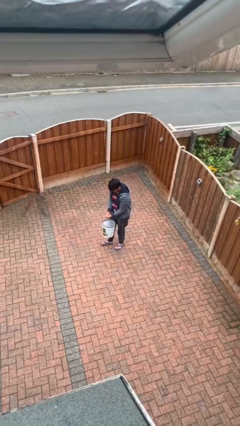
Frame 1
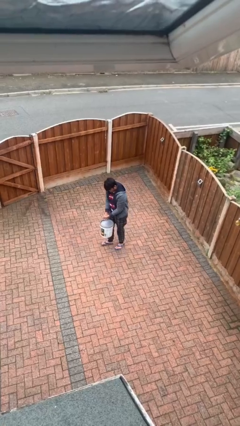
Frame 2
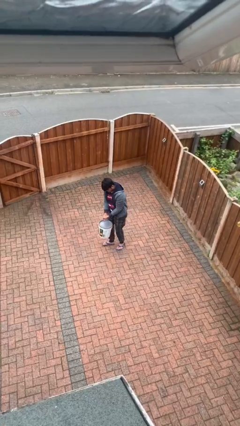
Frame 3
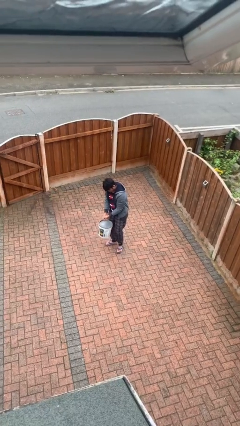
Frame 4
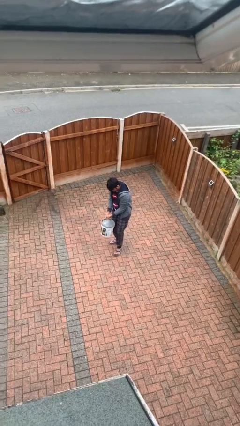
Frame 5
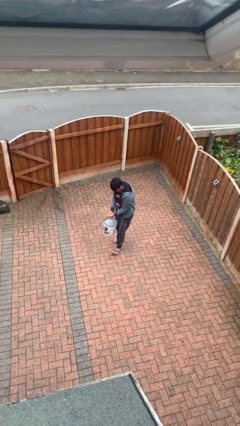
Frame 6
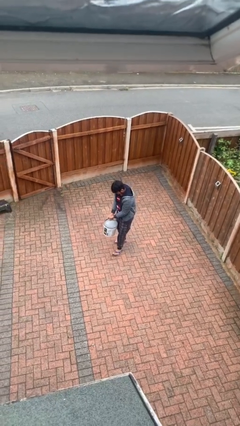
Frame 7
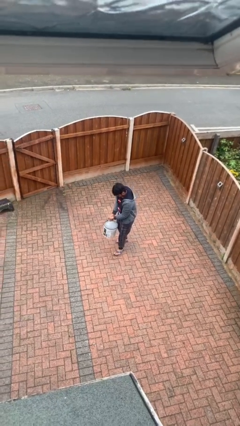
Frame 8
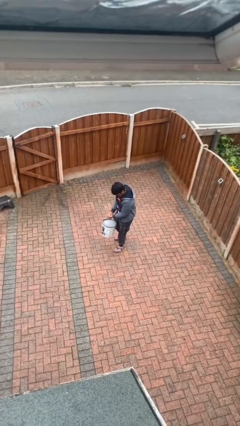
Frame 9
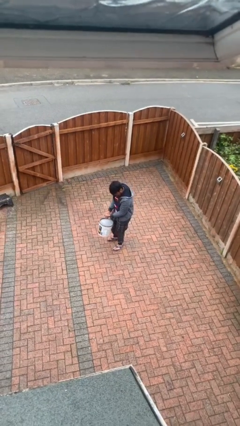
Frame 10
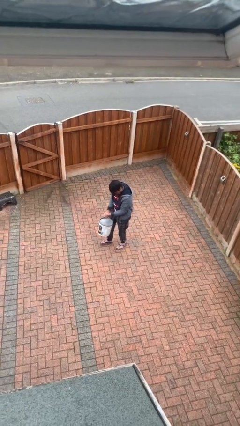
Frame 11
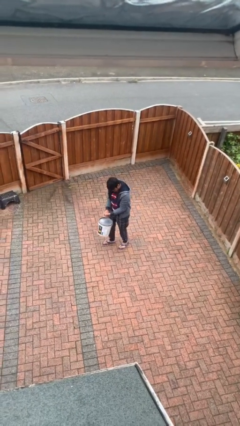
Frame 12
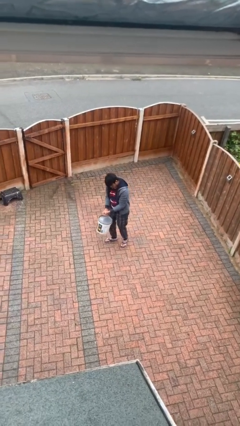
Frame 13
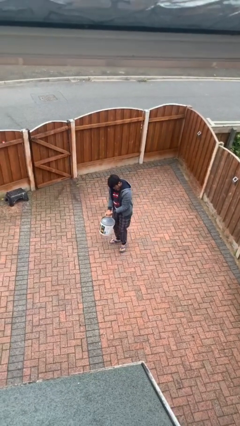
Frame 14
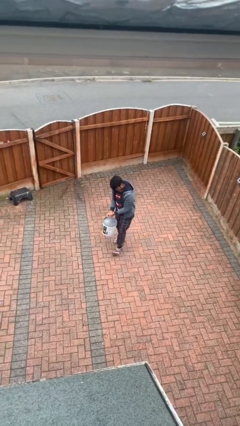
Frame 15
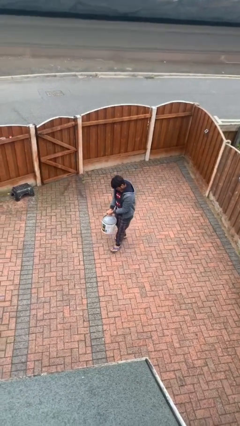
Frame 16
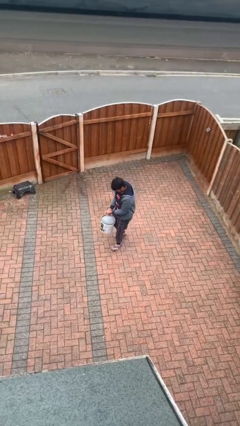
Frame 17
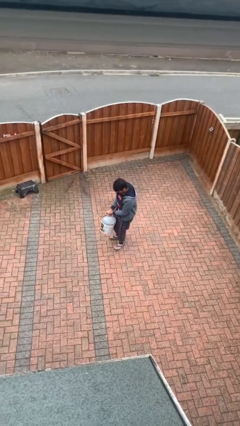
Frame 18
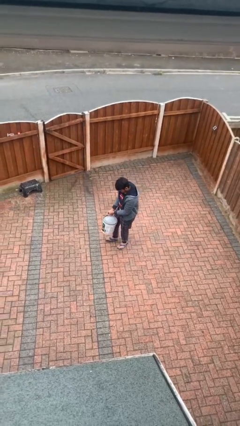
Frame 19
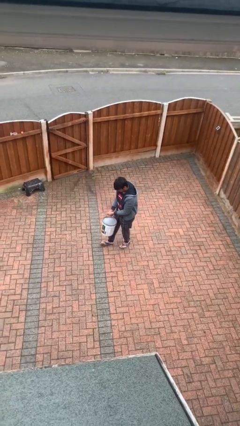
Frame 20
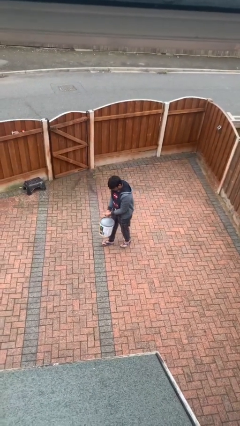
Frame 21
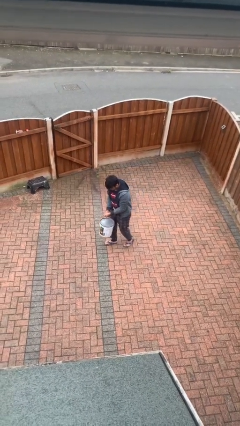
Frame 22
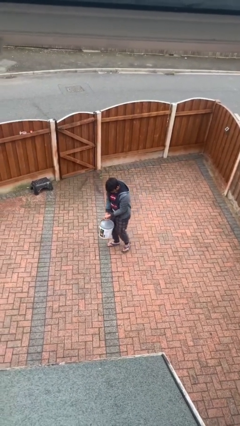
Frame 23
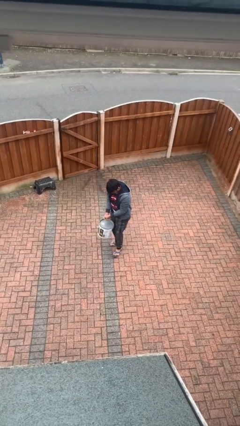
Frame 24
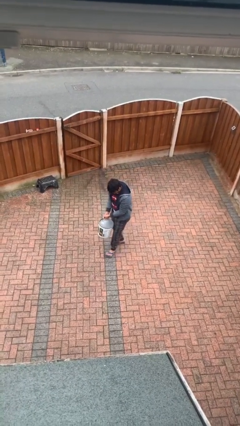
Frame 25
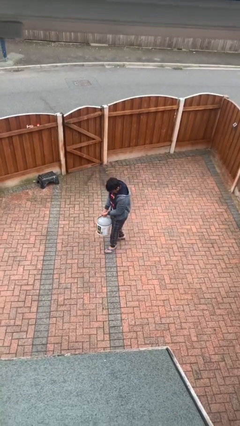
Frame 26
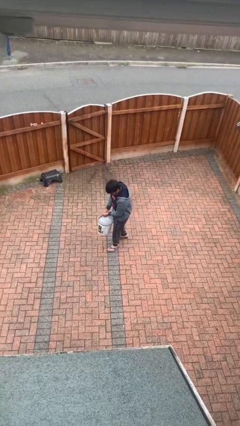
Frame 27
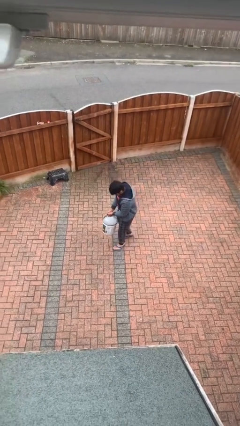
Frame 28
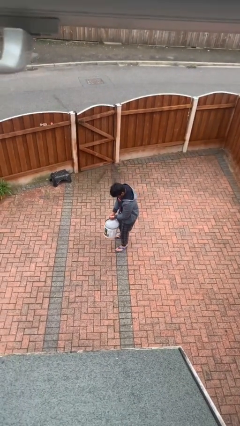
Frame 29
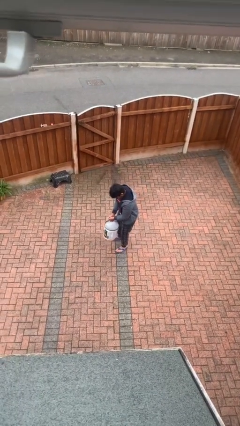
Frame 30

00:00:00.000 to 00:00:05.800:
person carries heavy object

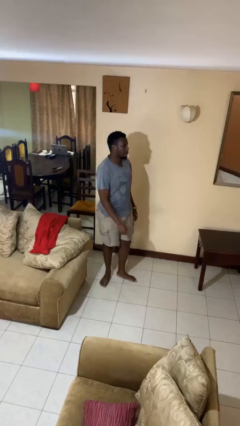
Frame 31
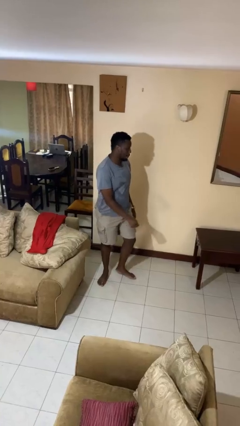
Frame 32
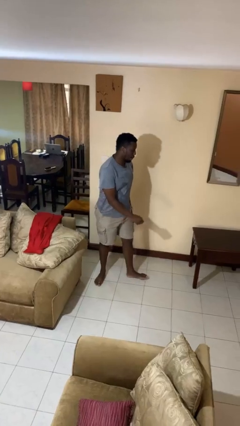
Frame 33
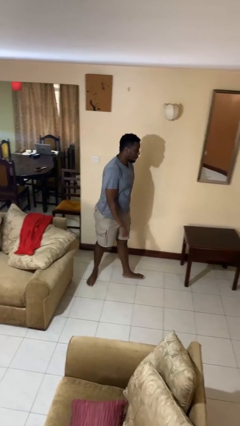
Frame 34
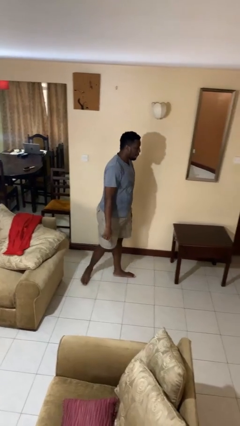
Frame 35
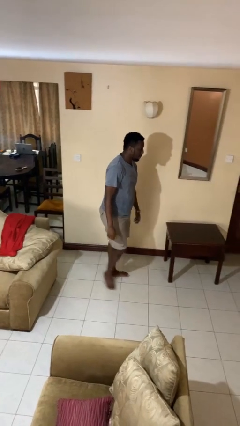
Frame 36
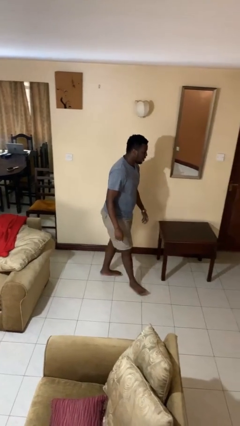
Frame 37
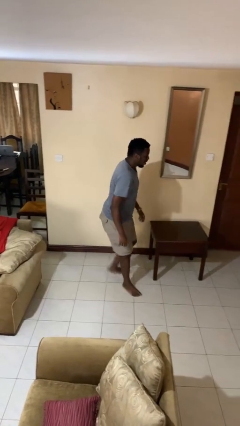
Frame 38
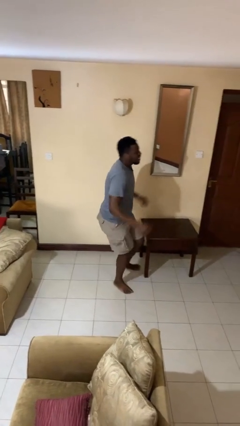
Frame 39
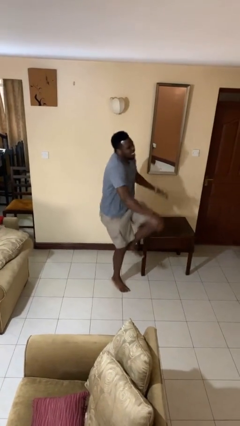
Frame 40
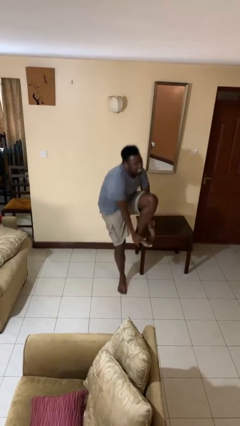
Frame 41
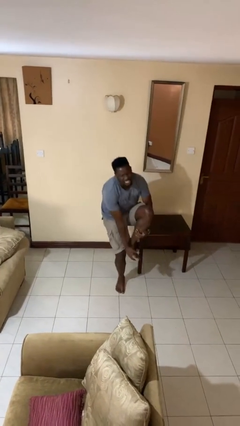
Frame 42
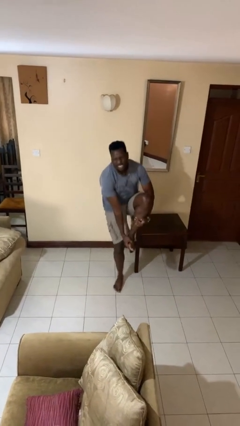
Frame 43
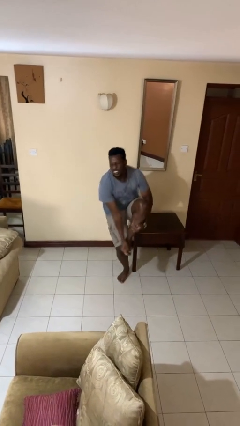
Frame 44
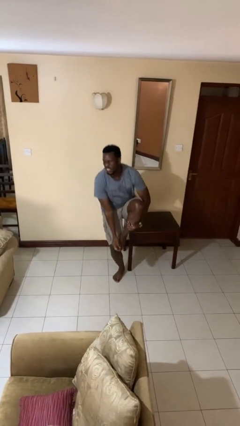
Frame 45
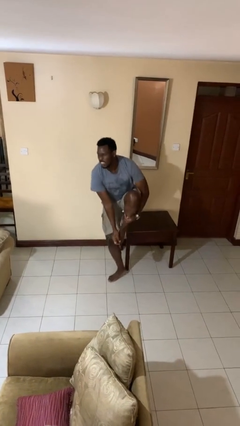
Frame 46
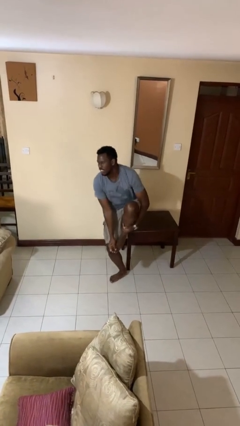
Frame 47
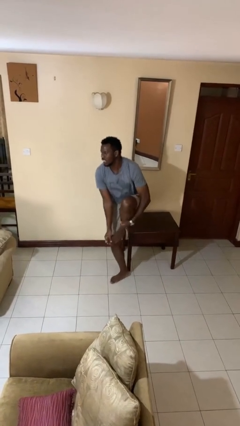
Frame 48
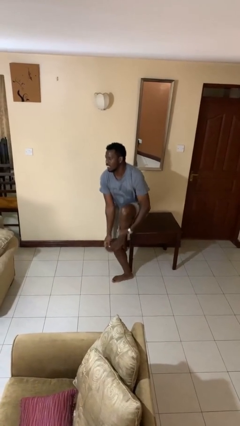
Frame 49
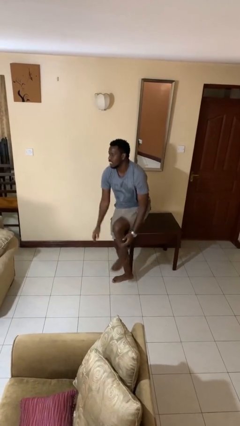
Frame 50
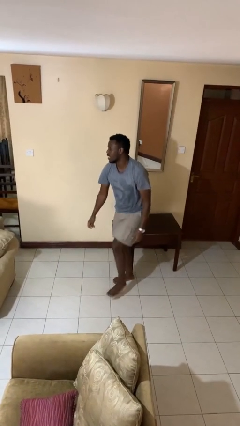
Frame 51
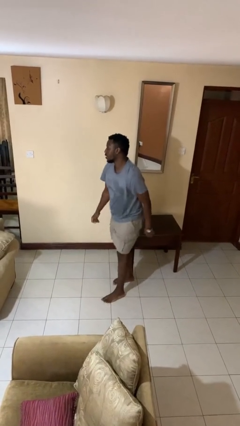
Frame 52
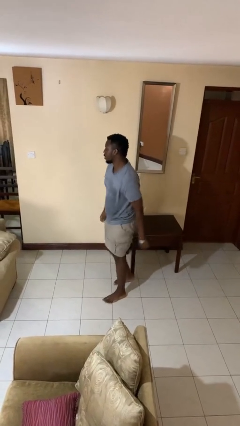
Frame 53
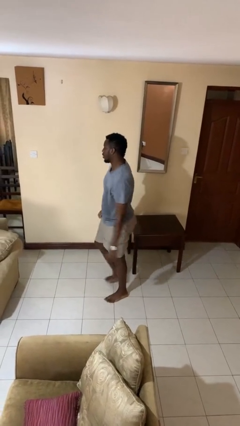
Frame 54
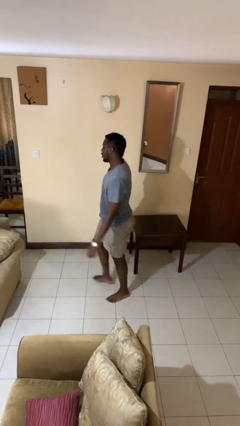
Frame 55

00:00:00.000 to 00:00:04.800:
person stubs toe

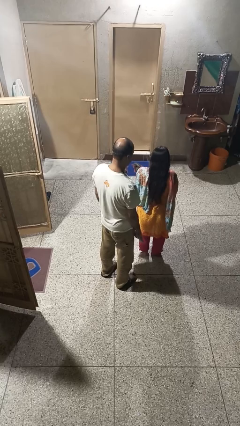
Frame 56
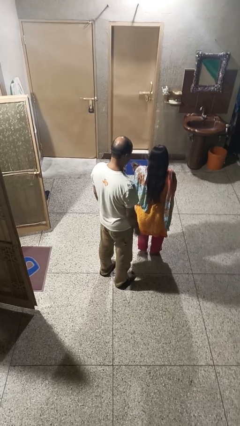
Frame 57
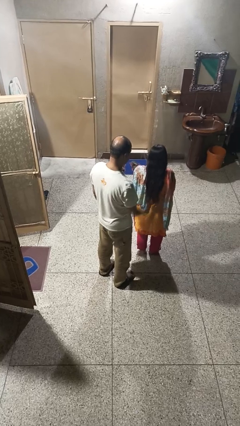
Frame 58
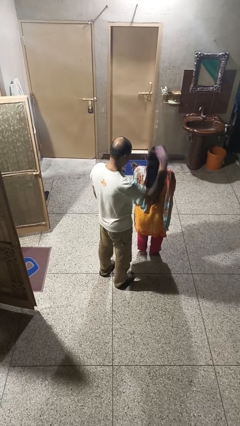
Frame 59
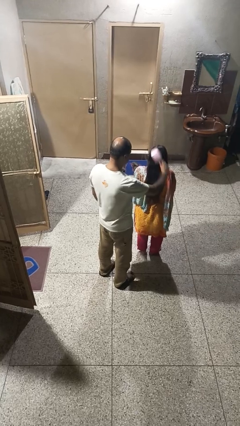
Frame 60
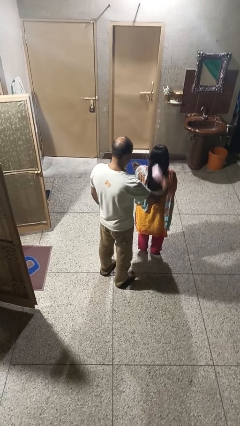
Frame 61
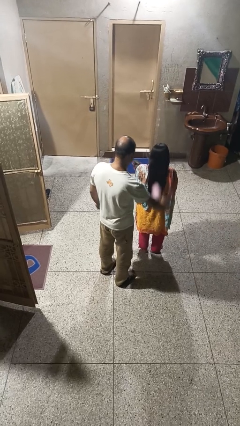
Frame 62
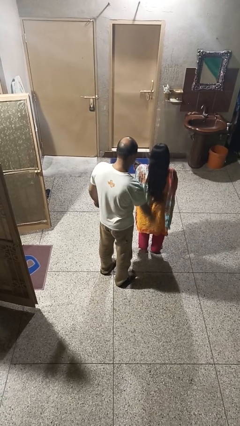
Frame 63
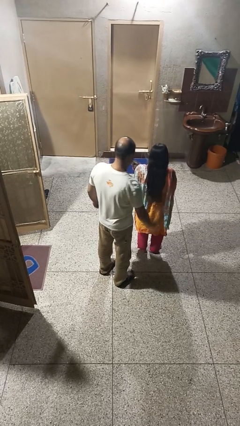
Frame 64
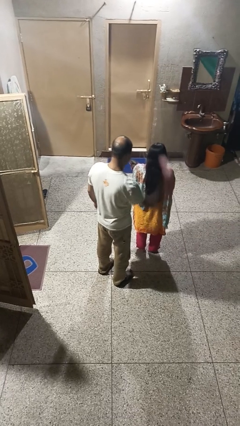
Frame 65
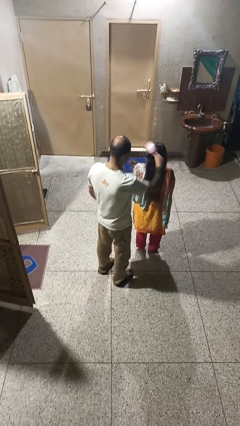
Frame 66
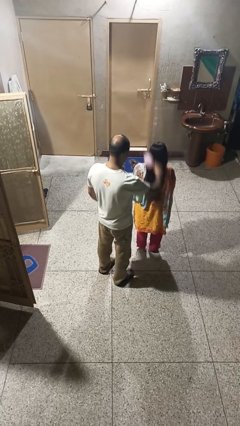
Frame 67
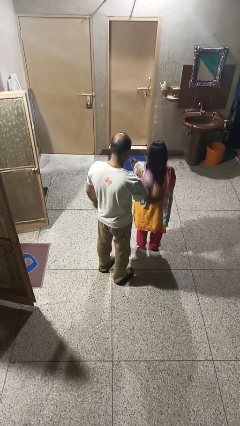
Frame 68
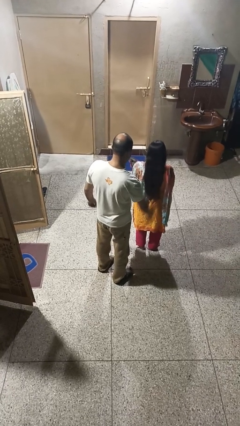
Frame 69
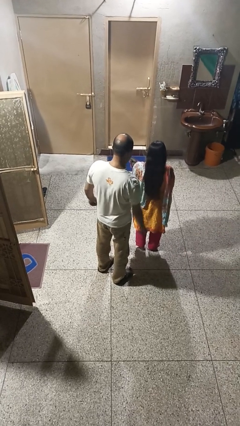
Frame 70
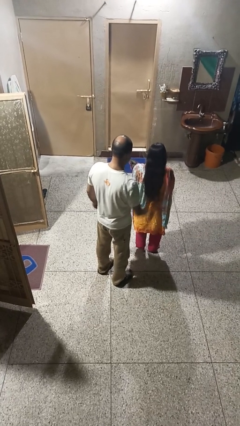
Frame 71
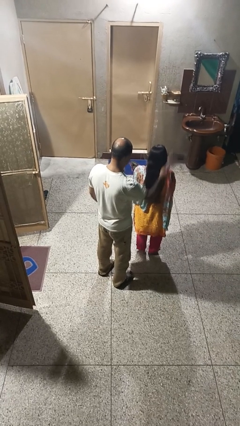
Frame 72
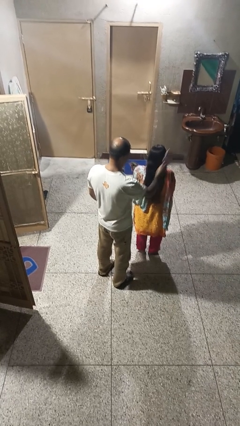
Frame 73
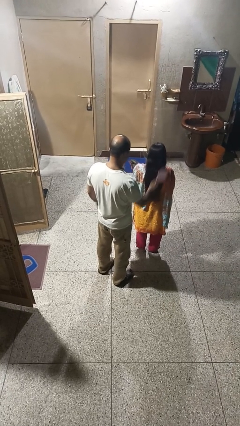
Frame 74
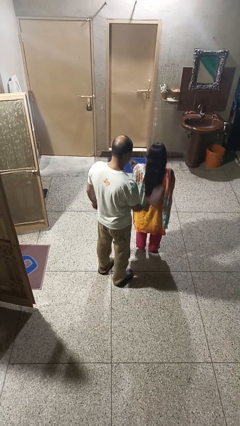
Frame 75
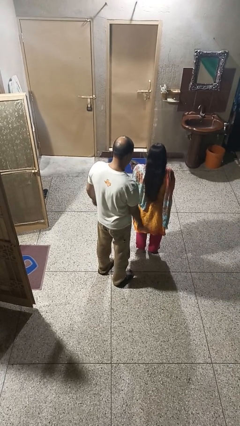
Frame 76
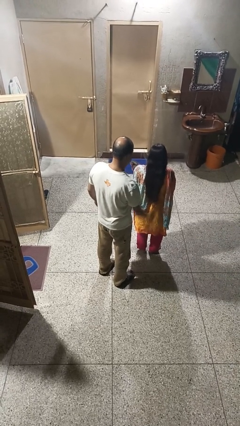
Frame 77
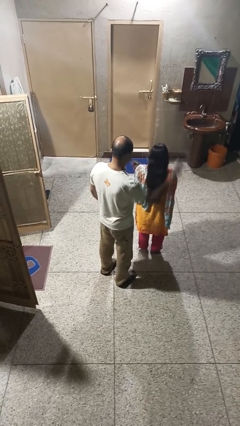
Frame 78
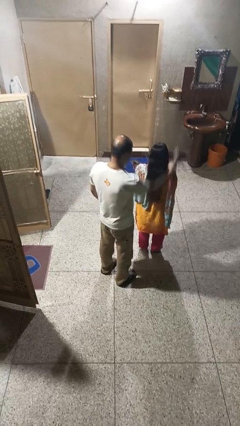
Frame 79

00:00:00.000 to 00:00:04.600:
person brushes hair of person

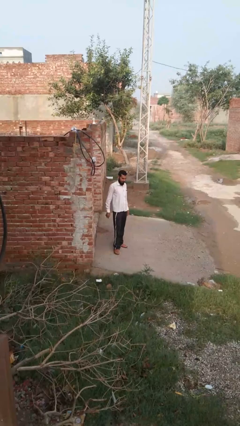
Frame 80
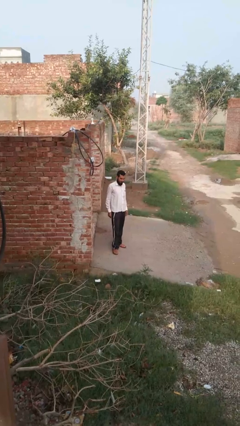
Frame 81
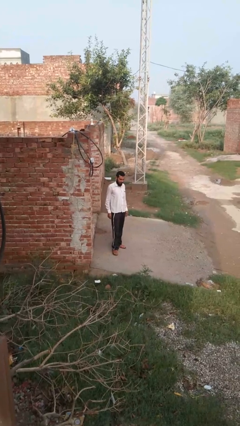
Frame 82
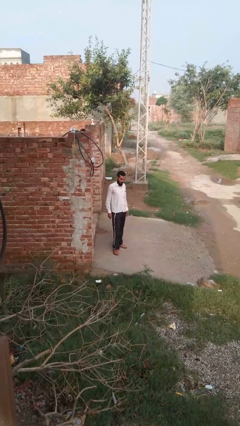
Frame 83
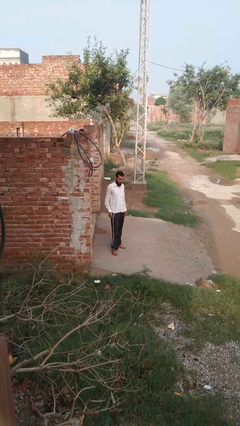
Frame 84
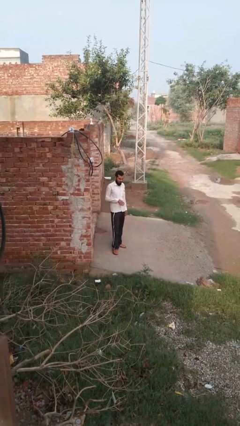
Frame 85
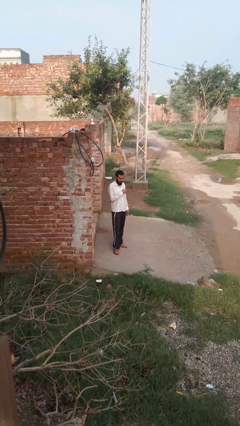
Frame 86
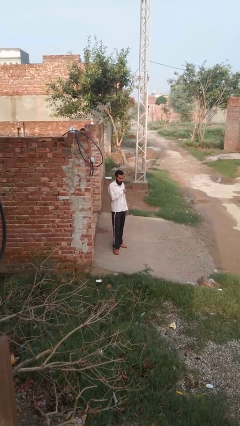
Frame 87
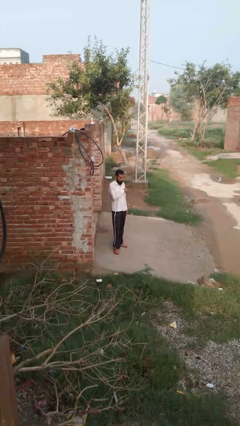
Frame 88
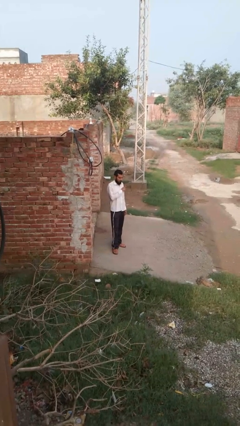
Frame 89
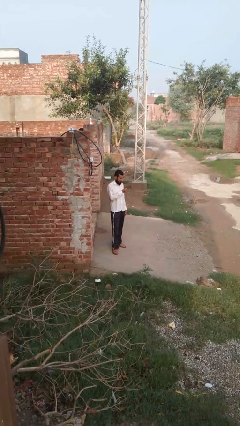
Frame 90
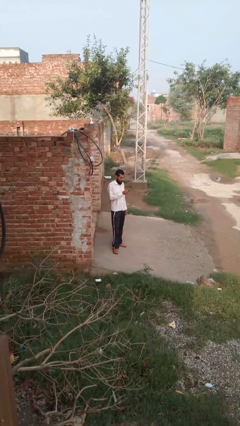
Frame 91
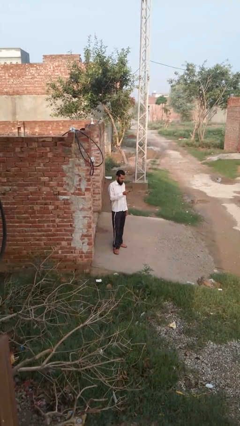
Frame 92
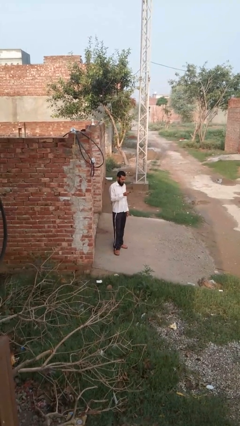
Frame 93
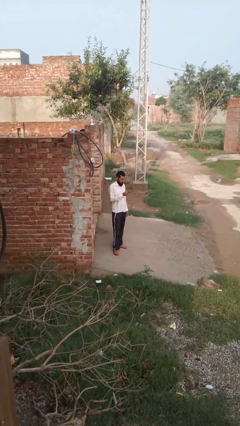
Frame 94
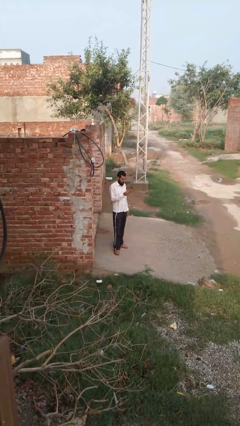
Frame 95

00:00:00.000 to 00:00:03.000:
person takes phone from pocket
